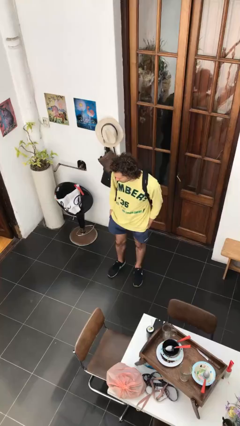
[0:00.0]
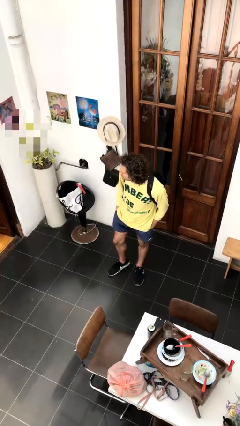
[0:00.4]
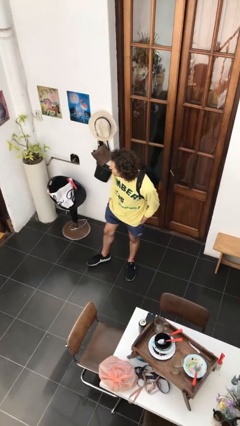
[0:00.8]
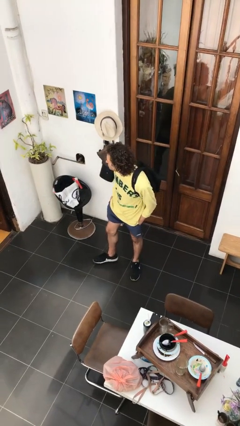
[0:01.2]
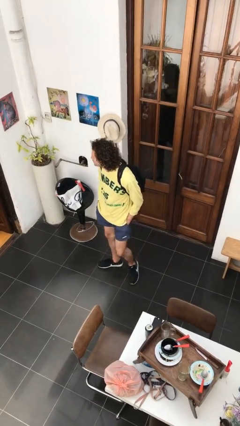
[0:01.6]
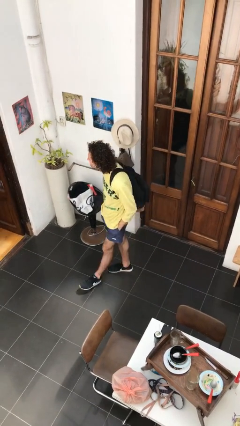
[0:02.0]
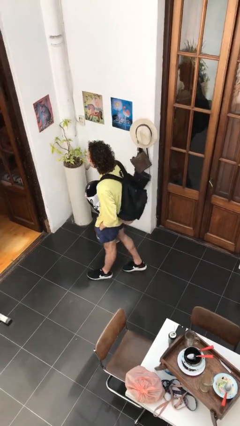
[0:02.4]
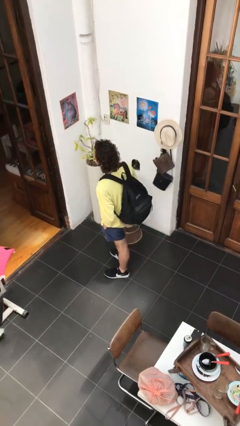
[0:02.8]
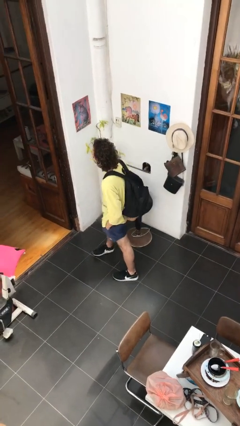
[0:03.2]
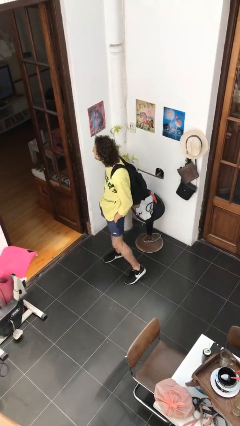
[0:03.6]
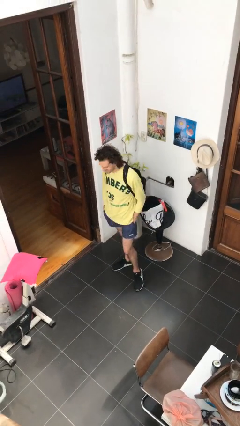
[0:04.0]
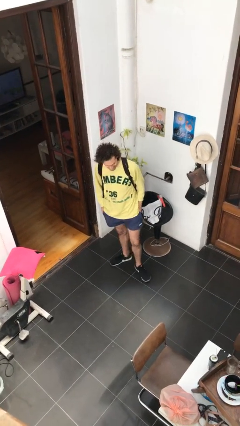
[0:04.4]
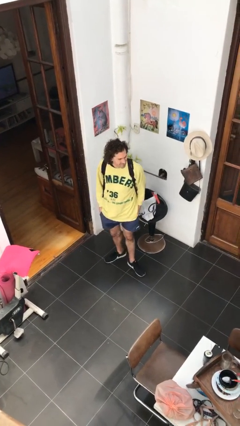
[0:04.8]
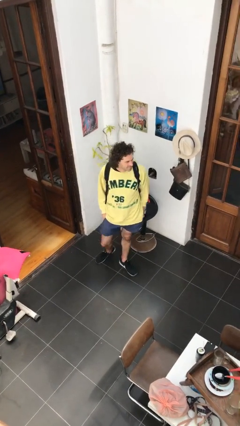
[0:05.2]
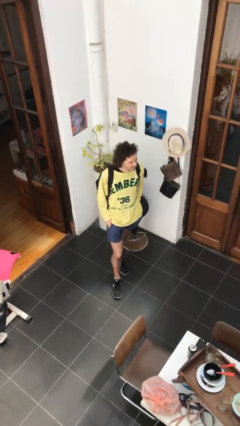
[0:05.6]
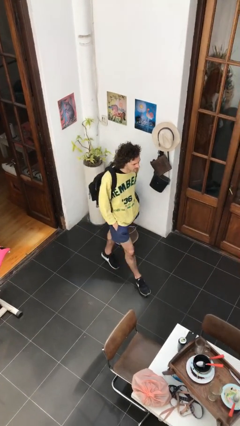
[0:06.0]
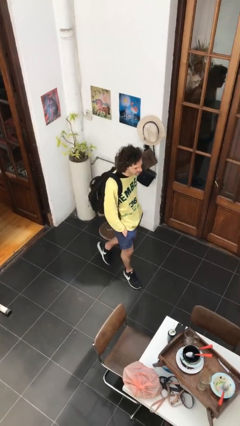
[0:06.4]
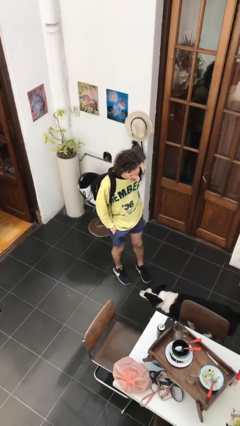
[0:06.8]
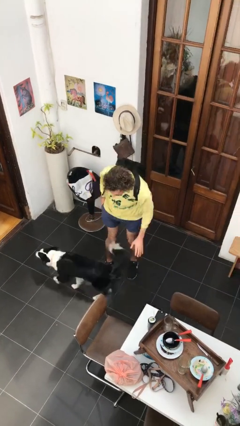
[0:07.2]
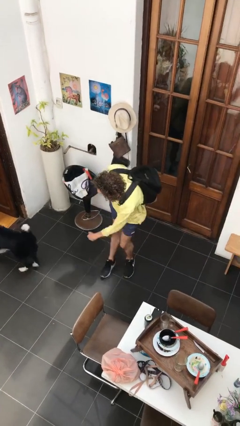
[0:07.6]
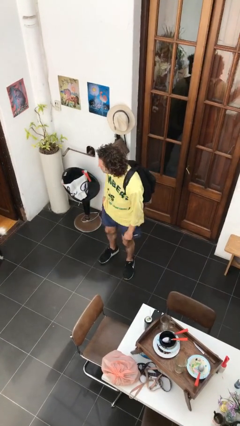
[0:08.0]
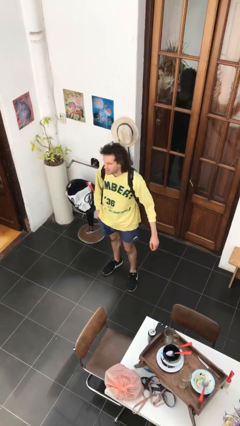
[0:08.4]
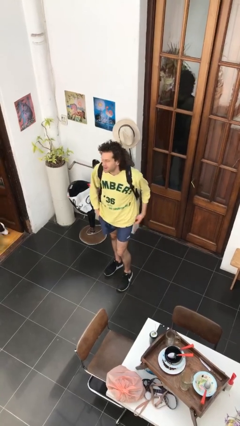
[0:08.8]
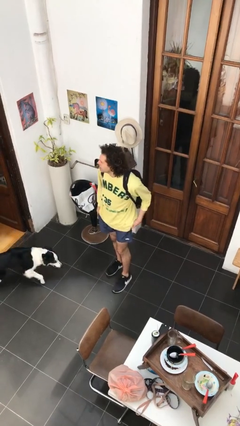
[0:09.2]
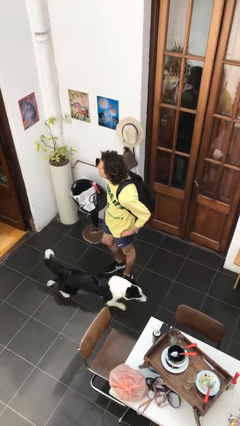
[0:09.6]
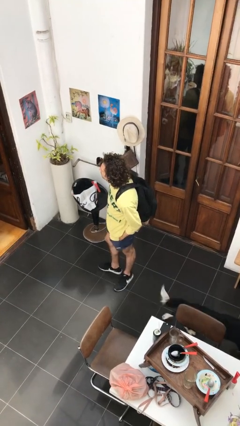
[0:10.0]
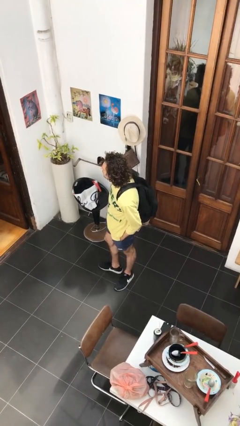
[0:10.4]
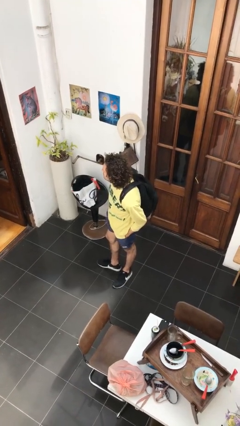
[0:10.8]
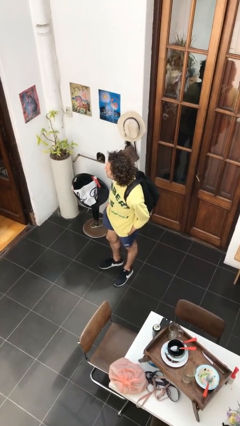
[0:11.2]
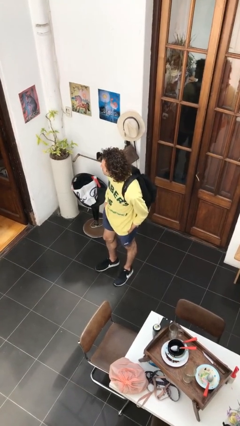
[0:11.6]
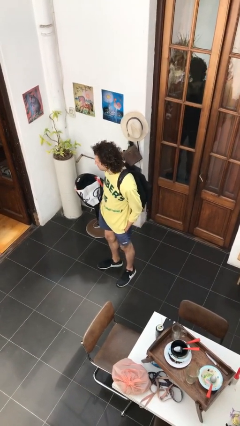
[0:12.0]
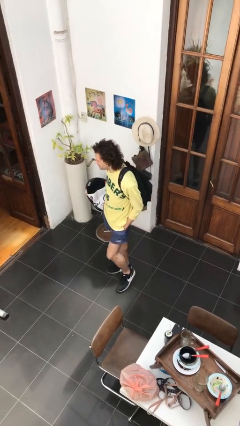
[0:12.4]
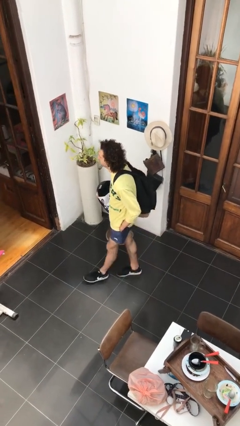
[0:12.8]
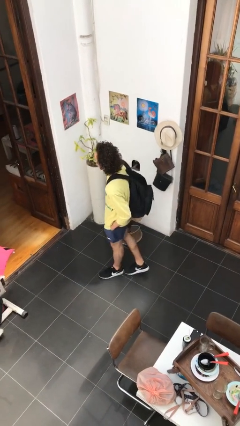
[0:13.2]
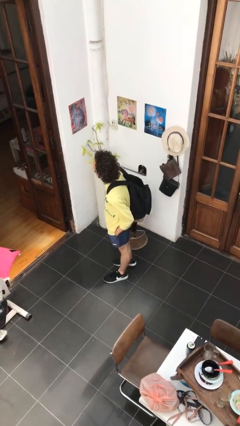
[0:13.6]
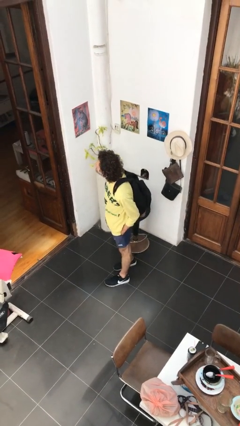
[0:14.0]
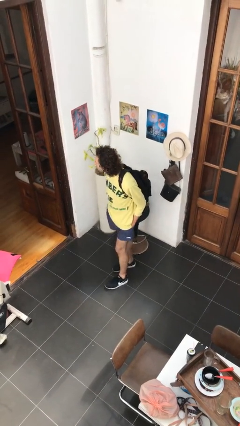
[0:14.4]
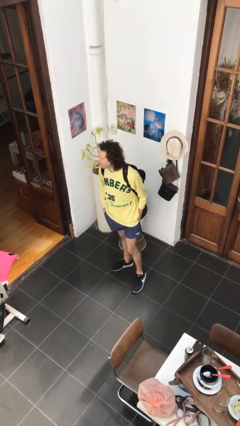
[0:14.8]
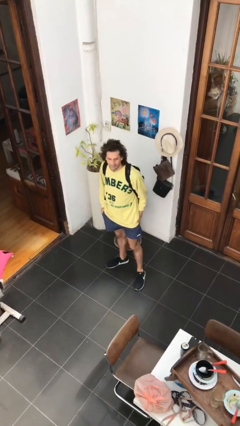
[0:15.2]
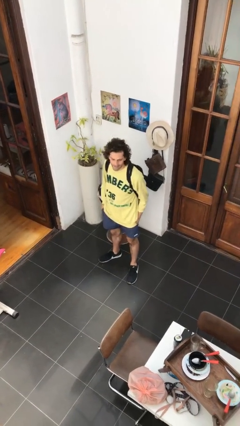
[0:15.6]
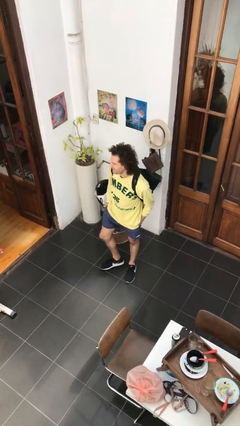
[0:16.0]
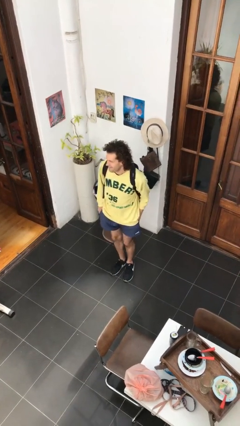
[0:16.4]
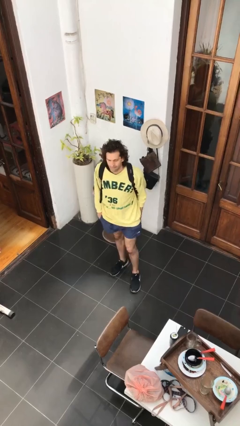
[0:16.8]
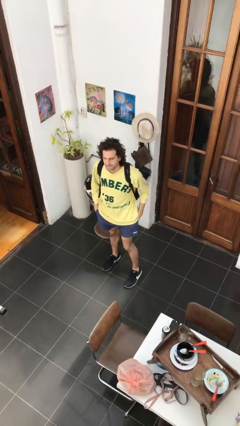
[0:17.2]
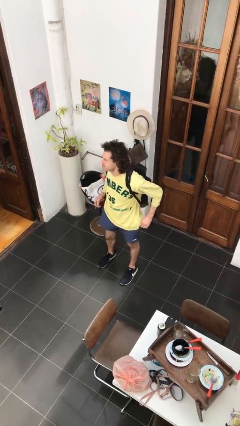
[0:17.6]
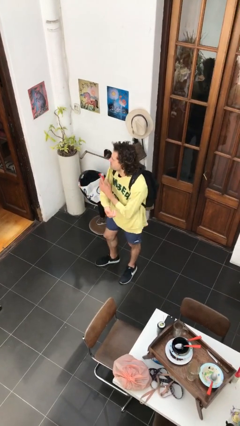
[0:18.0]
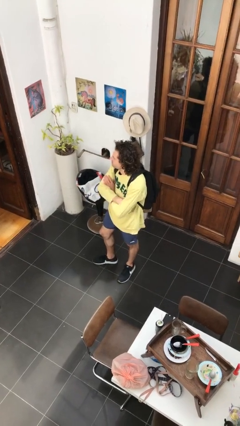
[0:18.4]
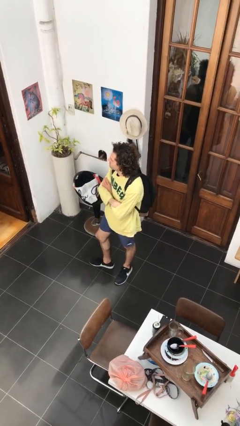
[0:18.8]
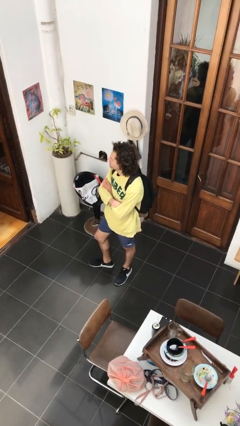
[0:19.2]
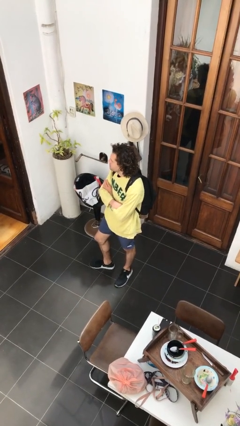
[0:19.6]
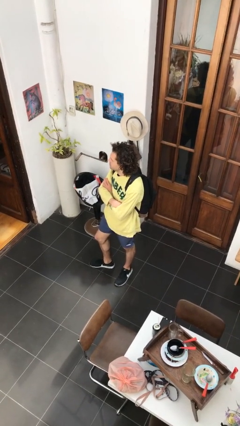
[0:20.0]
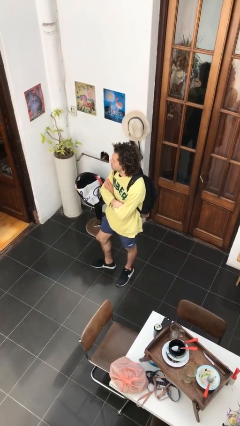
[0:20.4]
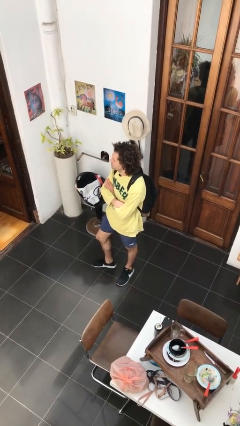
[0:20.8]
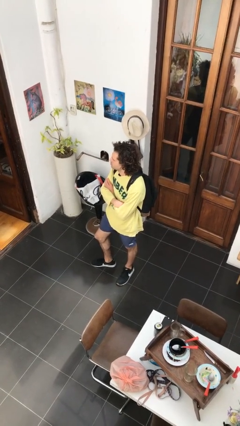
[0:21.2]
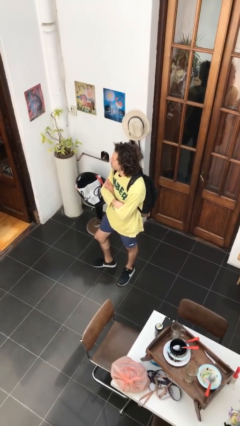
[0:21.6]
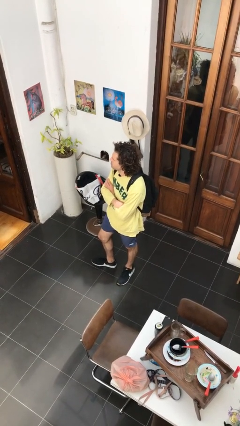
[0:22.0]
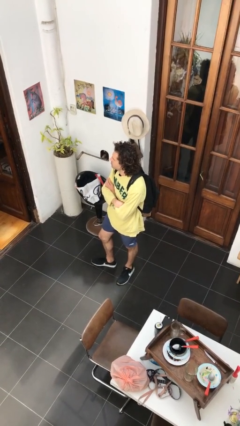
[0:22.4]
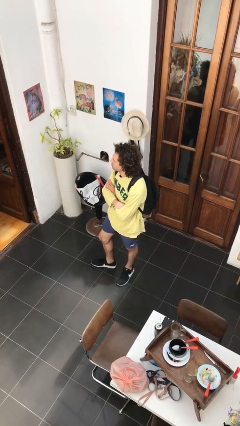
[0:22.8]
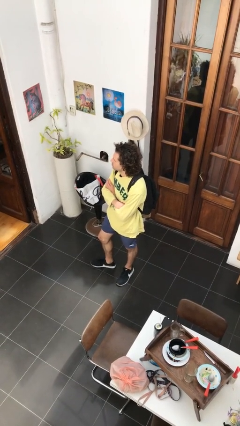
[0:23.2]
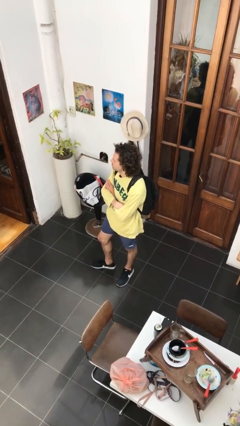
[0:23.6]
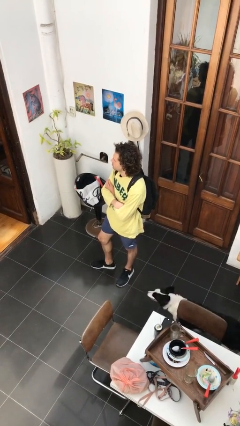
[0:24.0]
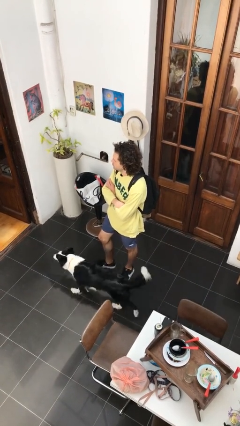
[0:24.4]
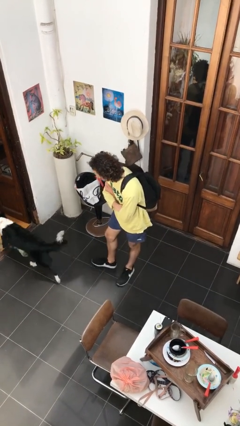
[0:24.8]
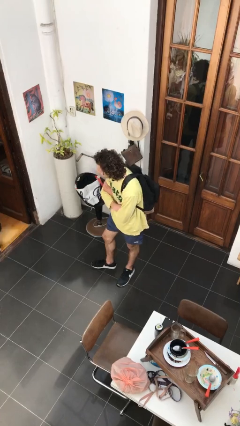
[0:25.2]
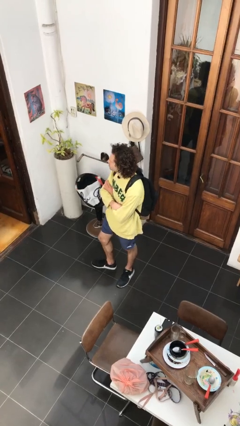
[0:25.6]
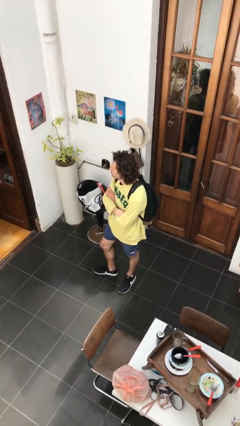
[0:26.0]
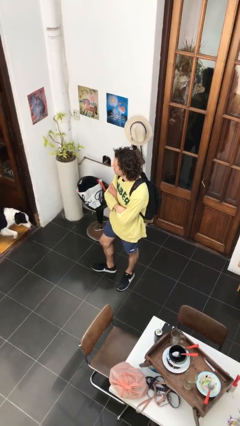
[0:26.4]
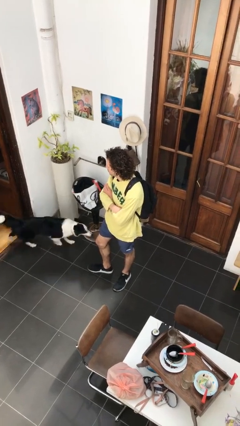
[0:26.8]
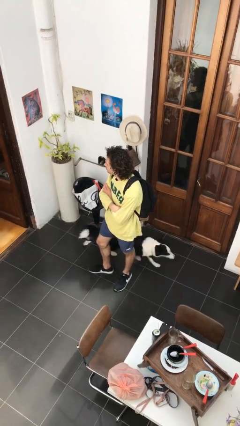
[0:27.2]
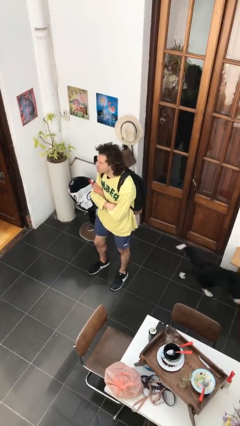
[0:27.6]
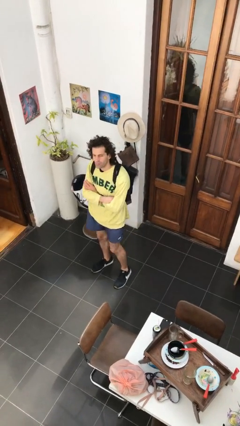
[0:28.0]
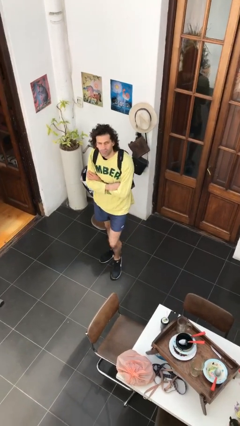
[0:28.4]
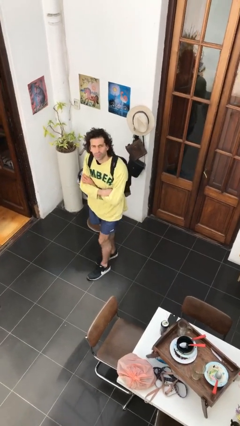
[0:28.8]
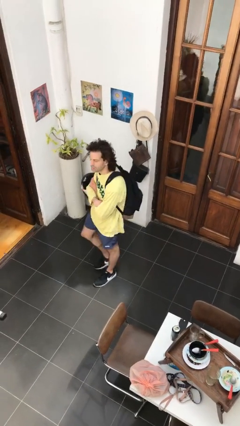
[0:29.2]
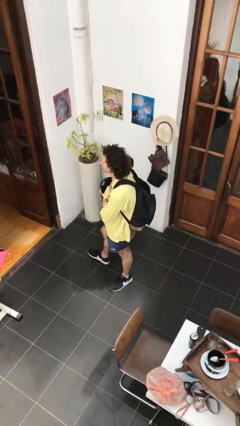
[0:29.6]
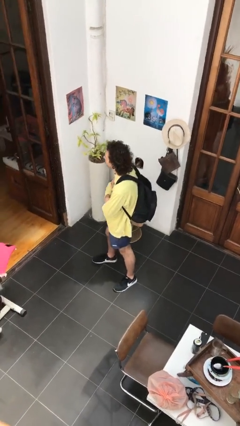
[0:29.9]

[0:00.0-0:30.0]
person walks

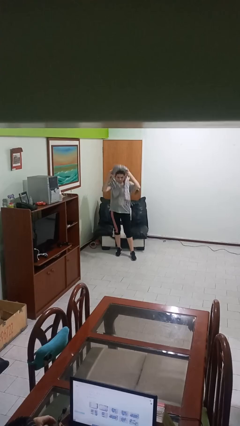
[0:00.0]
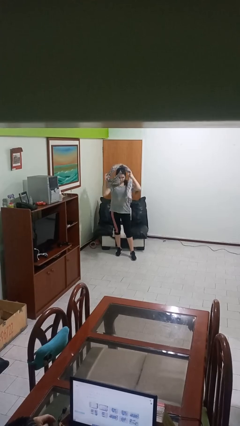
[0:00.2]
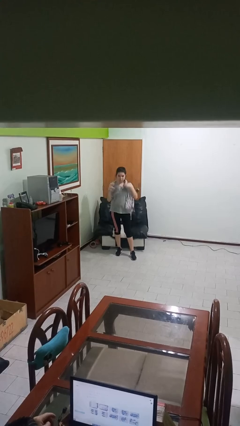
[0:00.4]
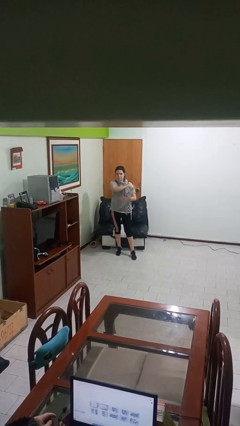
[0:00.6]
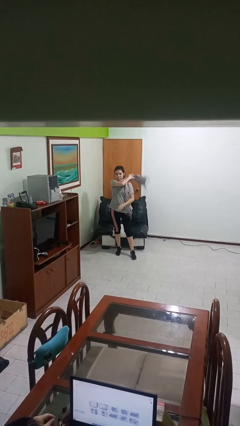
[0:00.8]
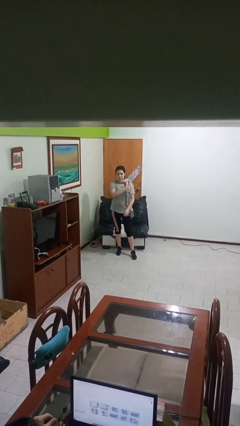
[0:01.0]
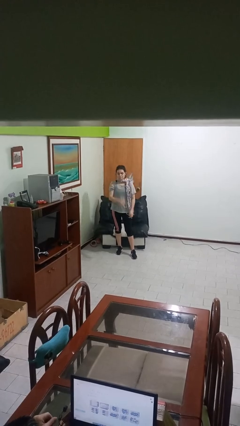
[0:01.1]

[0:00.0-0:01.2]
person puts on scarf

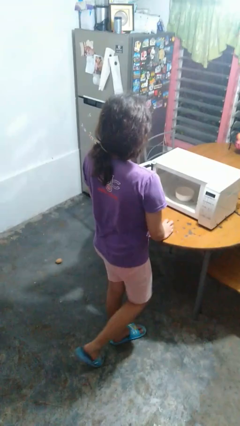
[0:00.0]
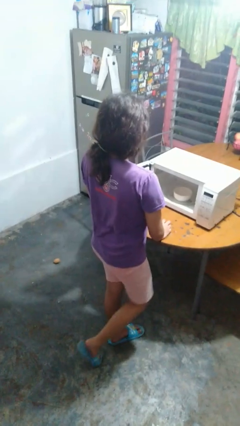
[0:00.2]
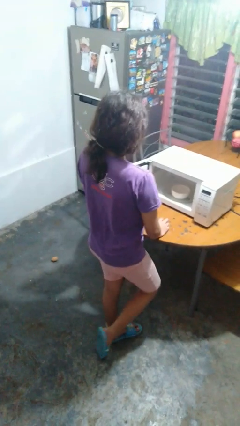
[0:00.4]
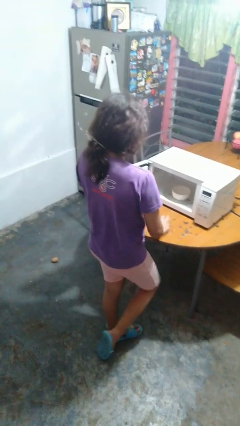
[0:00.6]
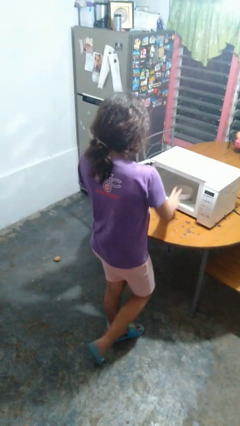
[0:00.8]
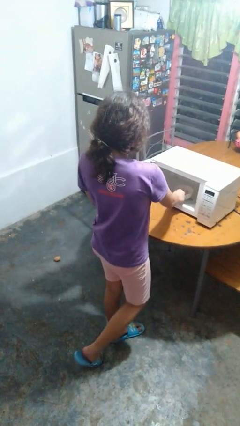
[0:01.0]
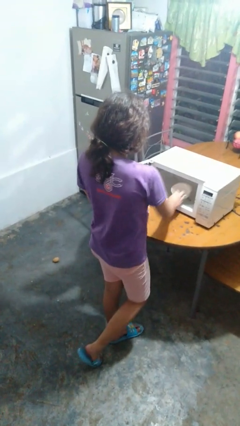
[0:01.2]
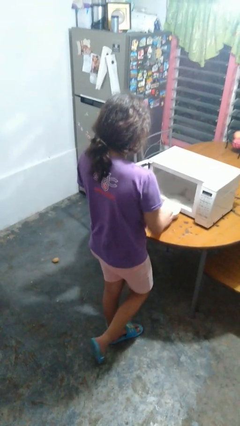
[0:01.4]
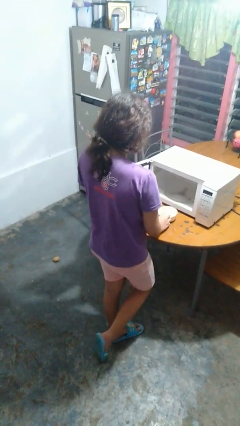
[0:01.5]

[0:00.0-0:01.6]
person takes object from microwave
